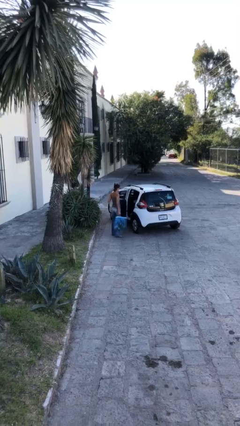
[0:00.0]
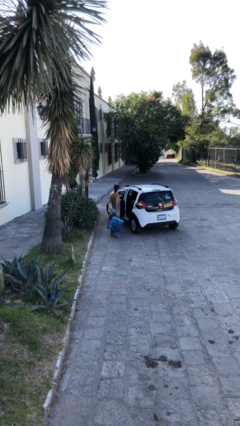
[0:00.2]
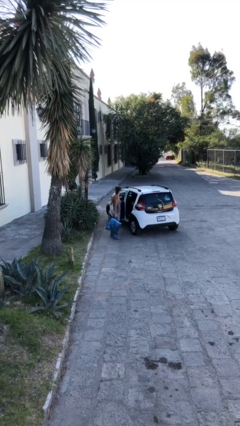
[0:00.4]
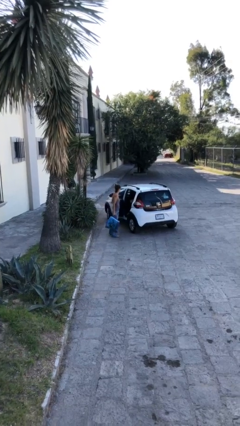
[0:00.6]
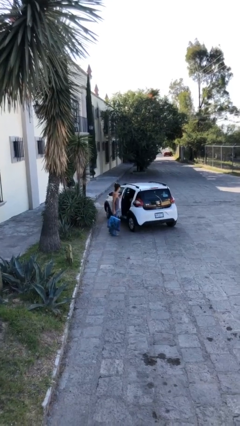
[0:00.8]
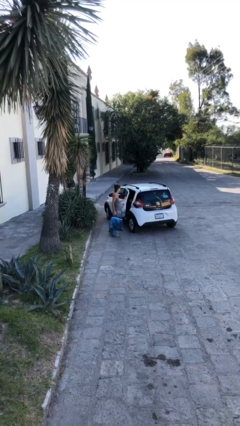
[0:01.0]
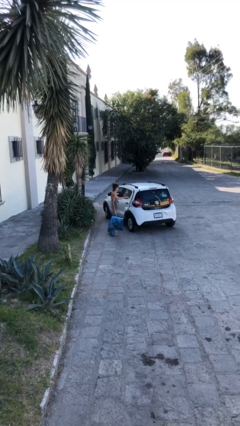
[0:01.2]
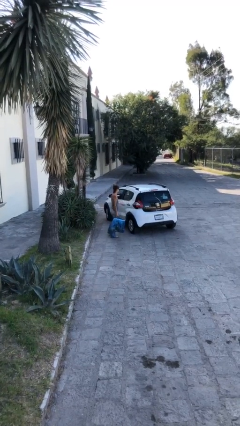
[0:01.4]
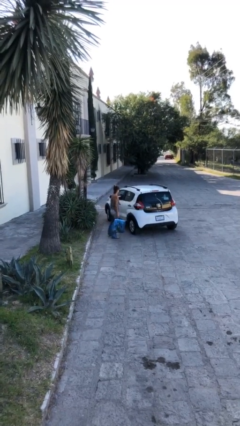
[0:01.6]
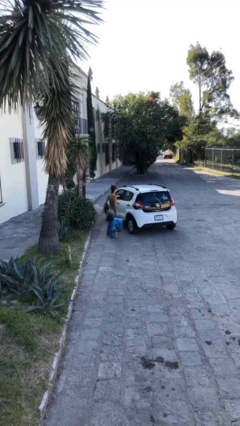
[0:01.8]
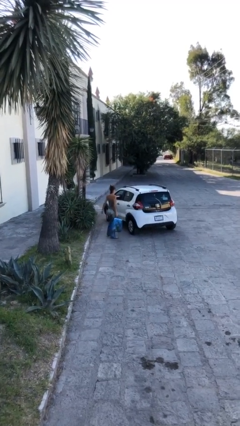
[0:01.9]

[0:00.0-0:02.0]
person closes car door

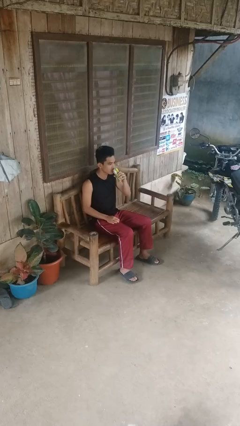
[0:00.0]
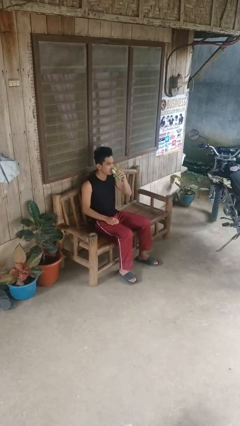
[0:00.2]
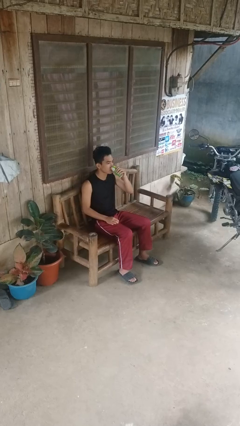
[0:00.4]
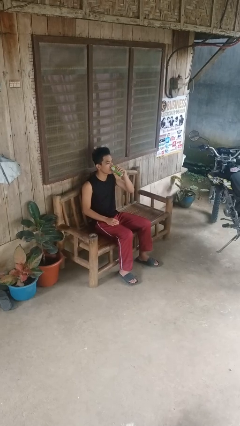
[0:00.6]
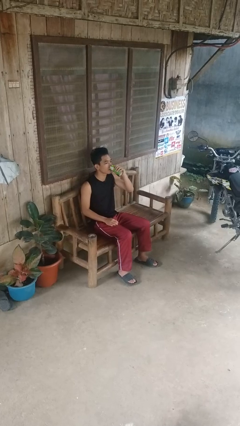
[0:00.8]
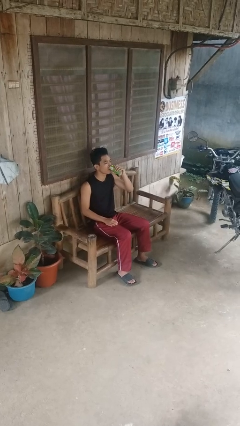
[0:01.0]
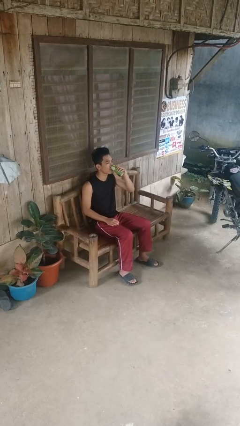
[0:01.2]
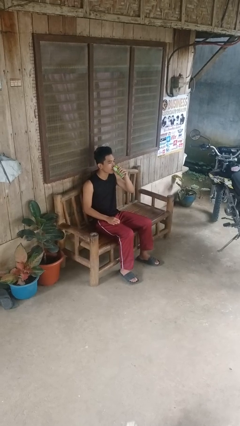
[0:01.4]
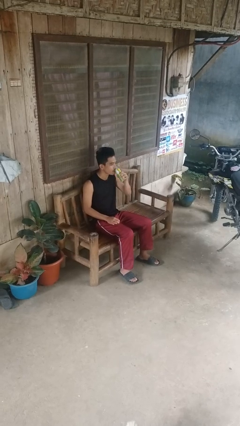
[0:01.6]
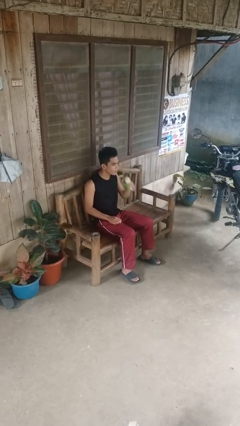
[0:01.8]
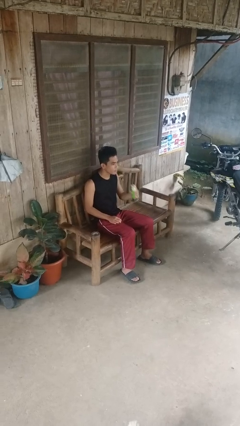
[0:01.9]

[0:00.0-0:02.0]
person drinks from beverage can

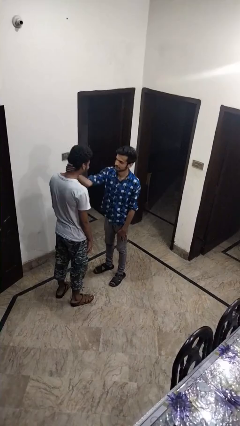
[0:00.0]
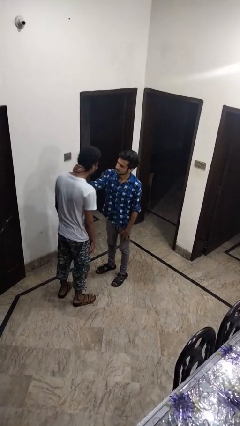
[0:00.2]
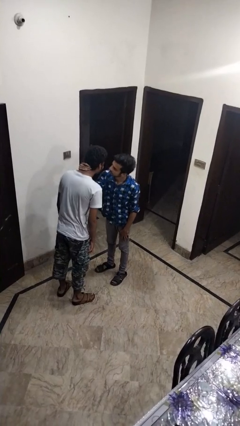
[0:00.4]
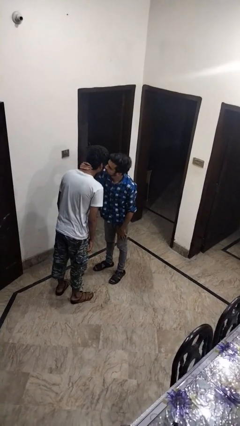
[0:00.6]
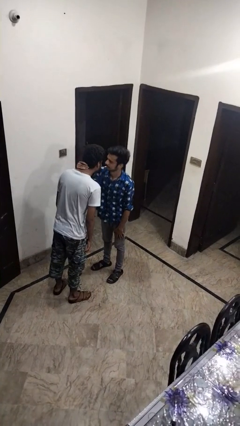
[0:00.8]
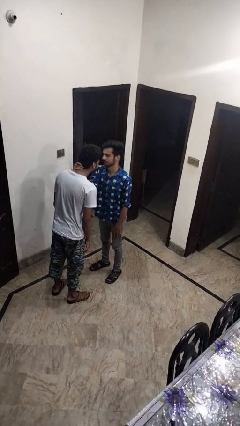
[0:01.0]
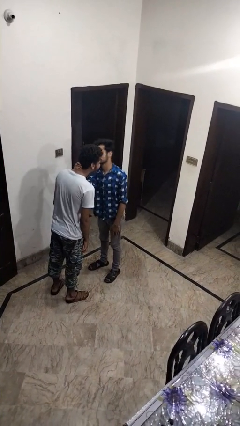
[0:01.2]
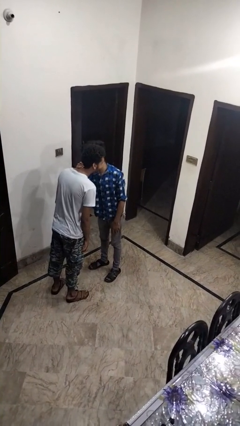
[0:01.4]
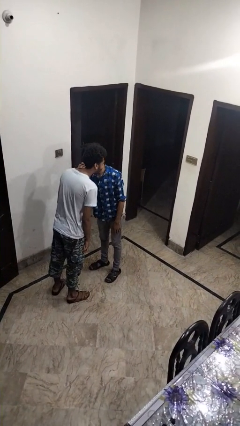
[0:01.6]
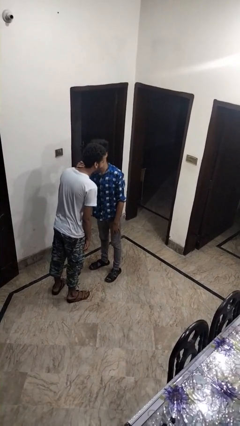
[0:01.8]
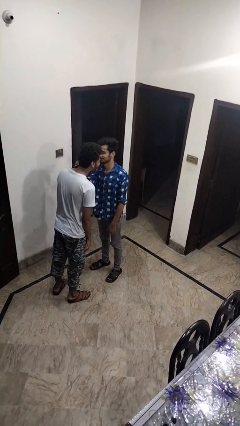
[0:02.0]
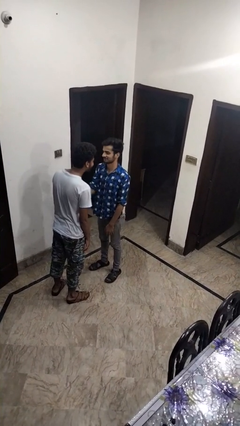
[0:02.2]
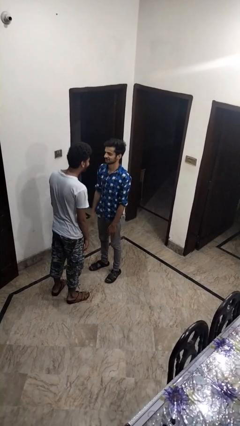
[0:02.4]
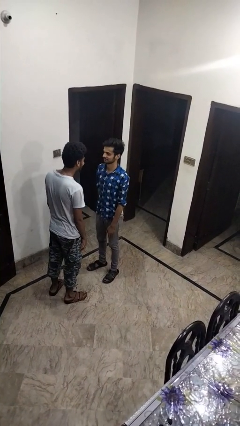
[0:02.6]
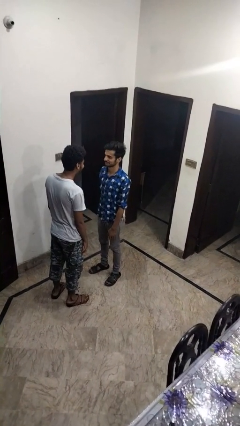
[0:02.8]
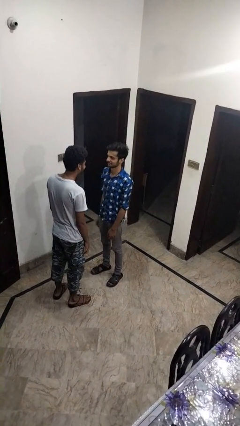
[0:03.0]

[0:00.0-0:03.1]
person kisses cheek of person

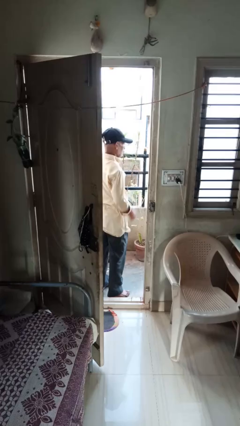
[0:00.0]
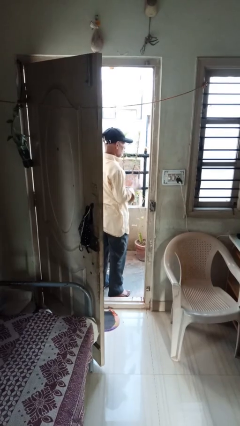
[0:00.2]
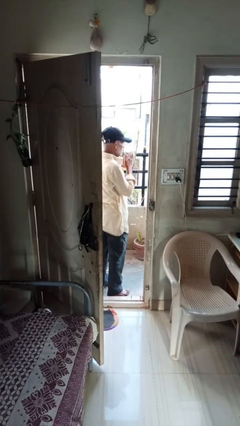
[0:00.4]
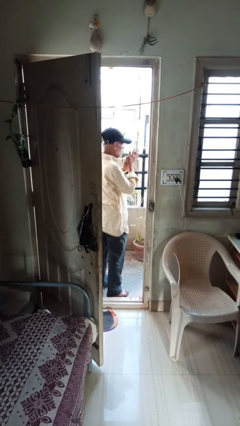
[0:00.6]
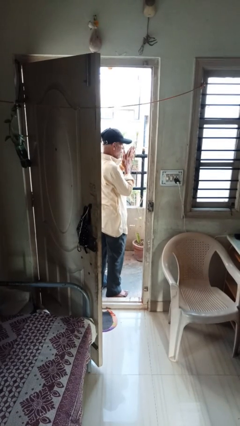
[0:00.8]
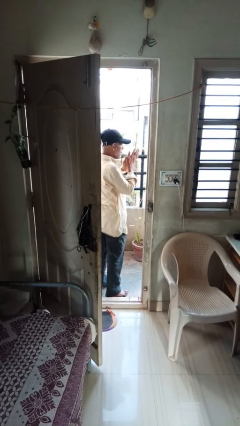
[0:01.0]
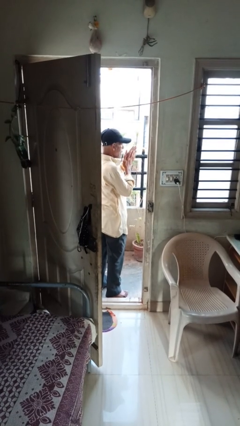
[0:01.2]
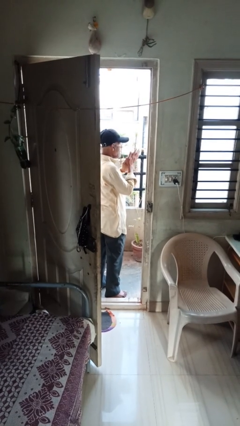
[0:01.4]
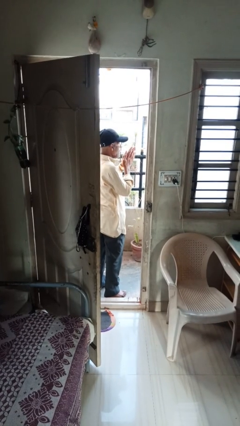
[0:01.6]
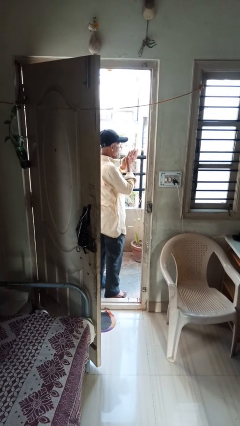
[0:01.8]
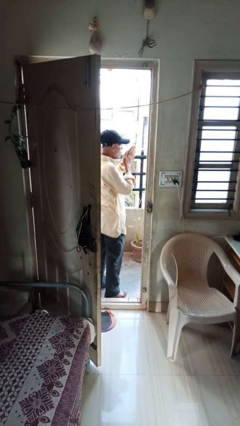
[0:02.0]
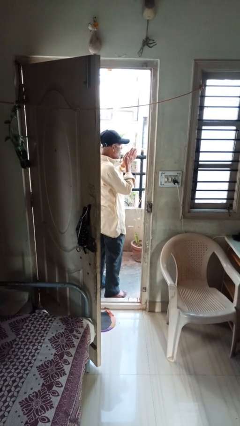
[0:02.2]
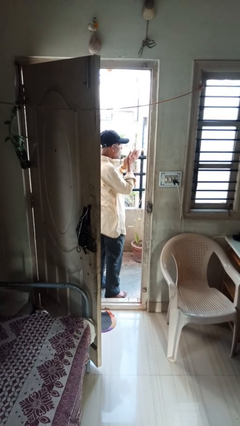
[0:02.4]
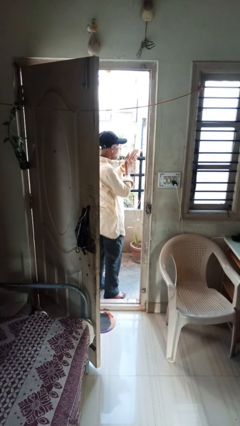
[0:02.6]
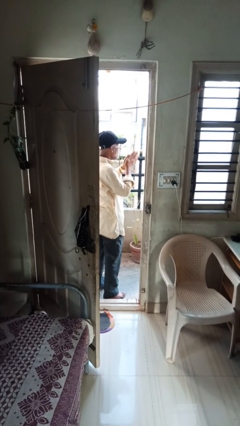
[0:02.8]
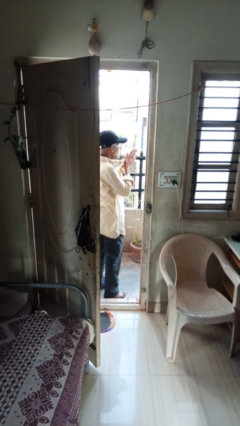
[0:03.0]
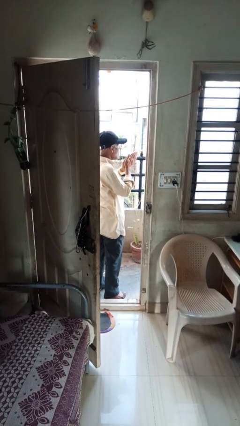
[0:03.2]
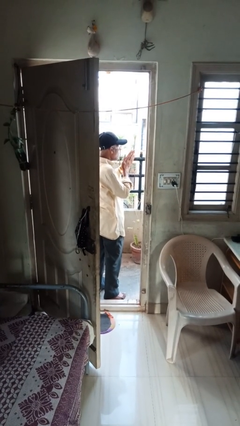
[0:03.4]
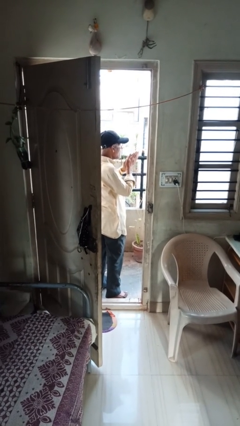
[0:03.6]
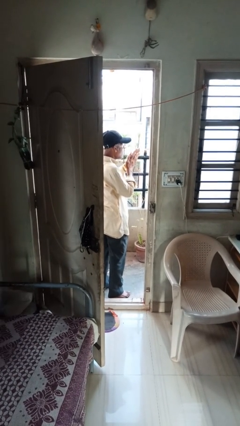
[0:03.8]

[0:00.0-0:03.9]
person blows into hands

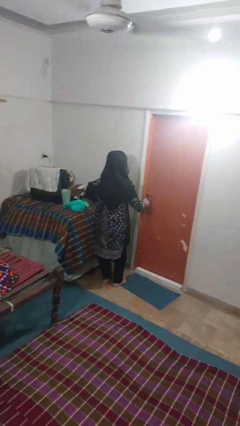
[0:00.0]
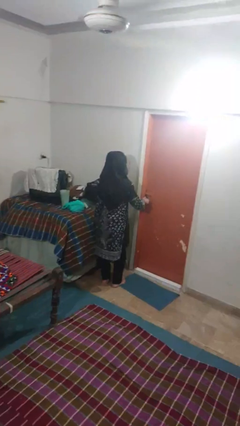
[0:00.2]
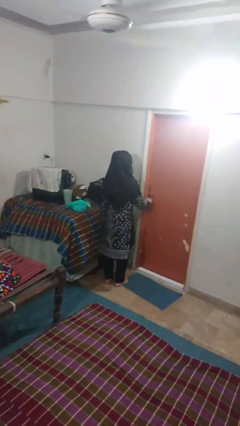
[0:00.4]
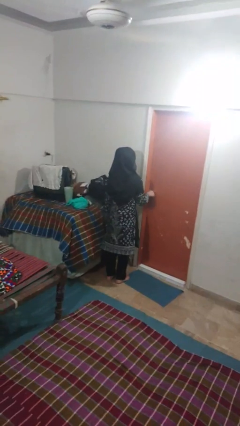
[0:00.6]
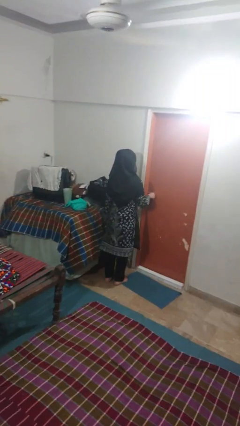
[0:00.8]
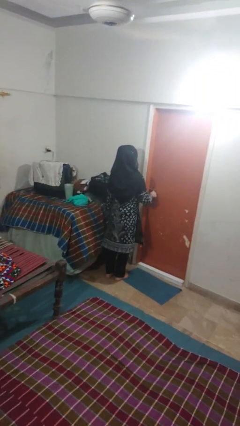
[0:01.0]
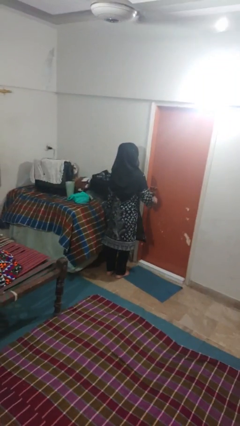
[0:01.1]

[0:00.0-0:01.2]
person unlocks door with keys

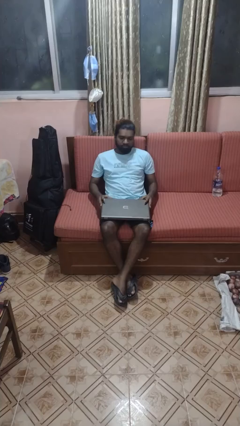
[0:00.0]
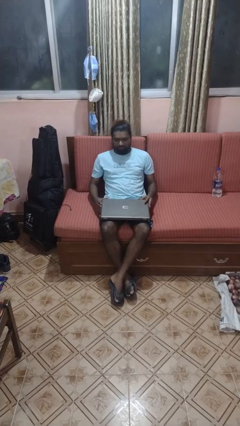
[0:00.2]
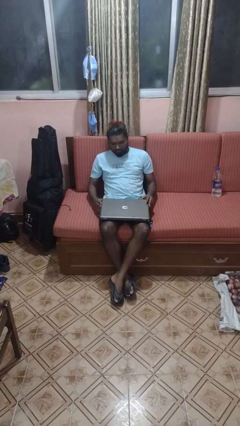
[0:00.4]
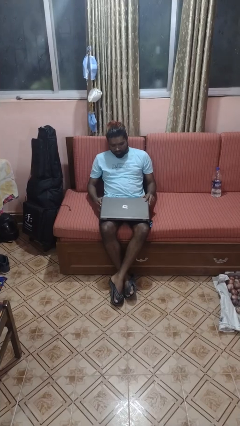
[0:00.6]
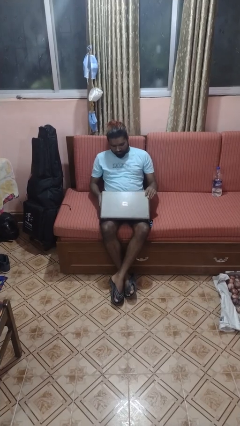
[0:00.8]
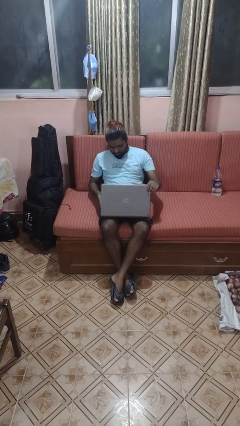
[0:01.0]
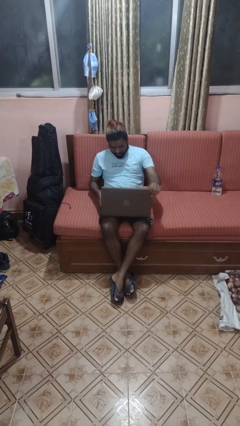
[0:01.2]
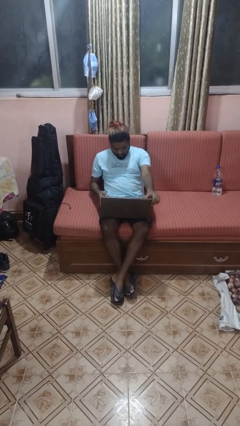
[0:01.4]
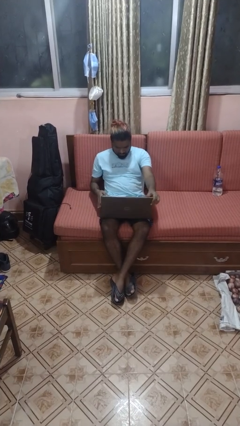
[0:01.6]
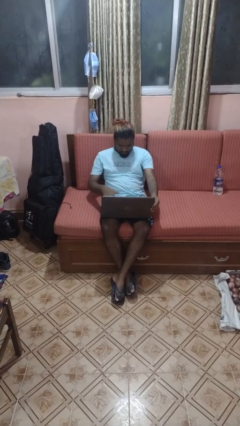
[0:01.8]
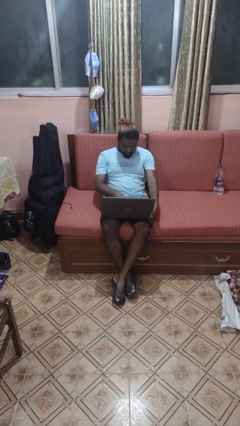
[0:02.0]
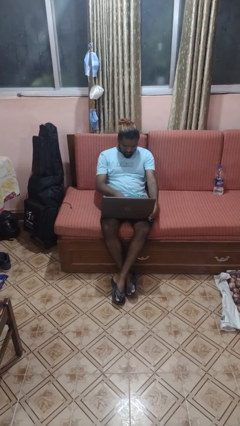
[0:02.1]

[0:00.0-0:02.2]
person opens laptop

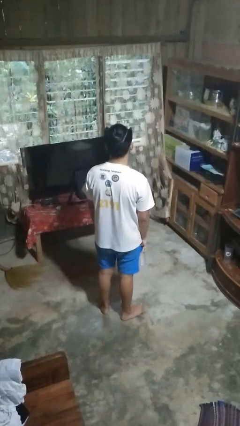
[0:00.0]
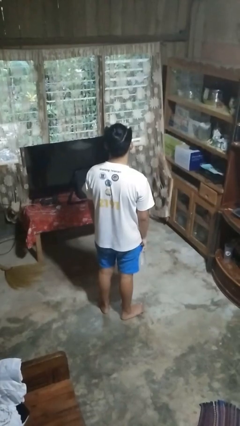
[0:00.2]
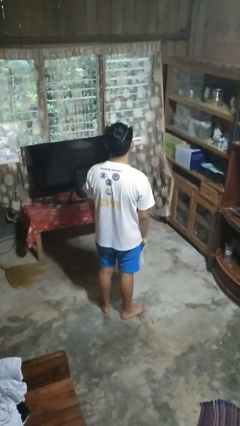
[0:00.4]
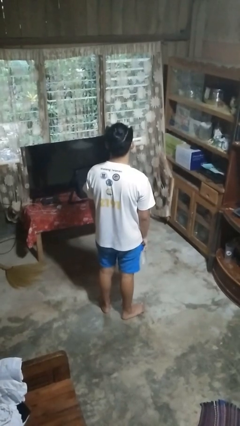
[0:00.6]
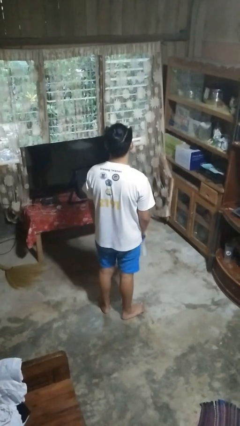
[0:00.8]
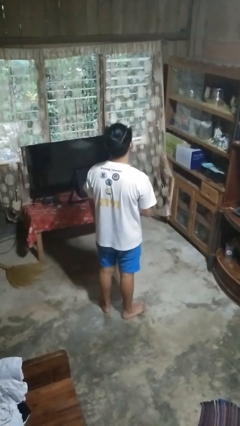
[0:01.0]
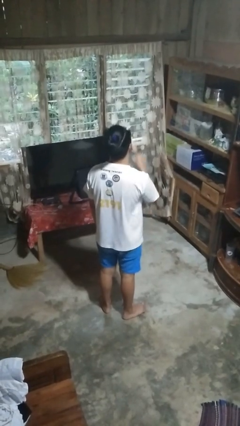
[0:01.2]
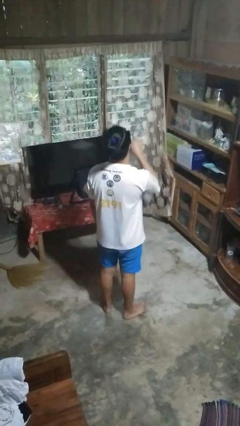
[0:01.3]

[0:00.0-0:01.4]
person drinks from bottle

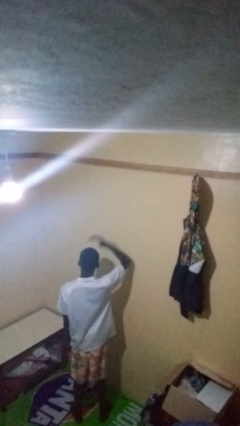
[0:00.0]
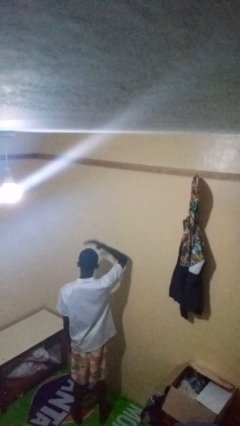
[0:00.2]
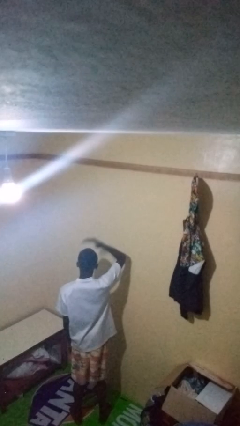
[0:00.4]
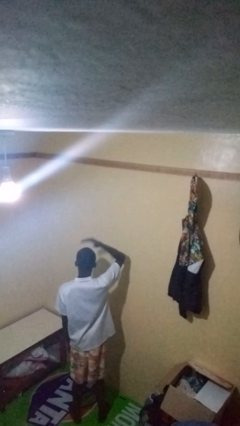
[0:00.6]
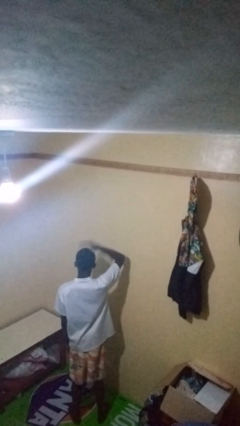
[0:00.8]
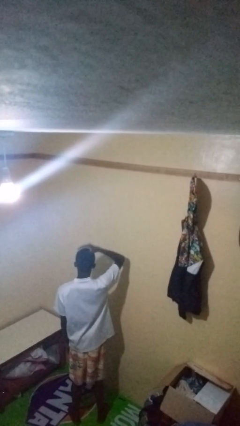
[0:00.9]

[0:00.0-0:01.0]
person pats head

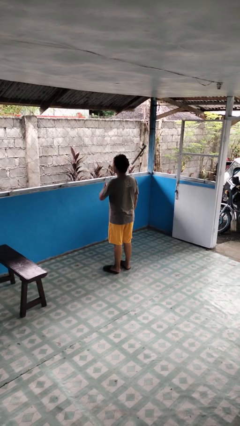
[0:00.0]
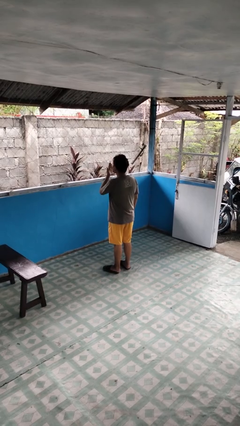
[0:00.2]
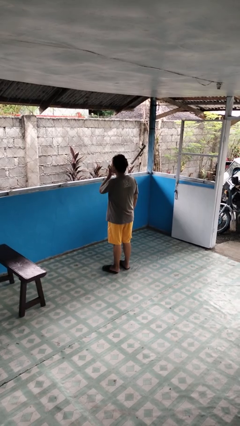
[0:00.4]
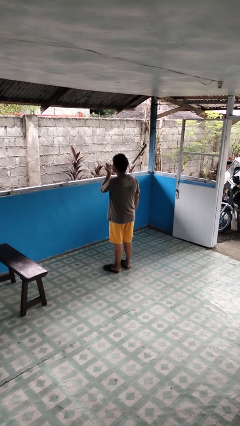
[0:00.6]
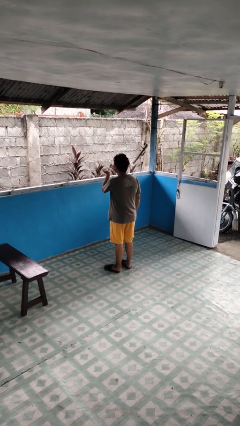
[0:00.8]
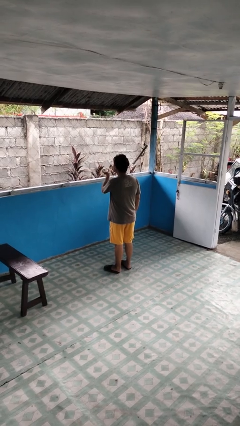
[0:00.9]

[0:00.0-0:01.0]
person gestures blow kiss
